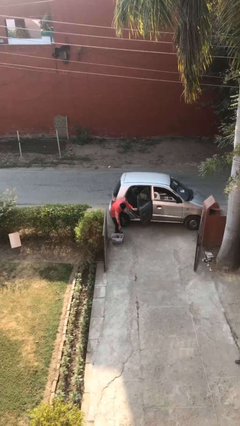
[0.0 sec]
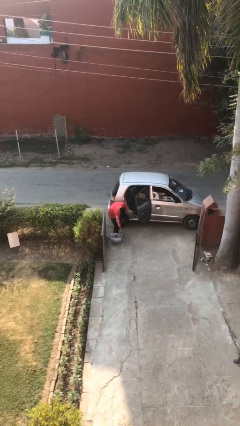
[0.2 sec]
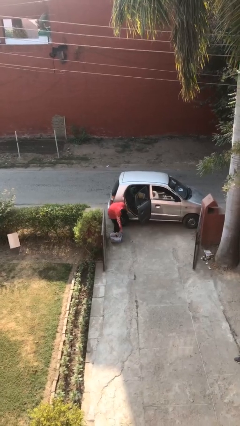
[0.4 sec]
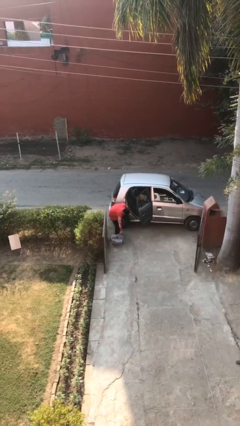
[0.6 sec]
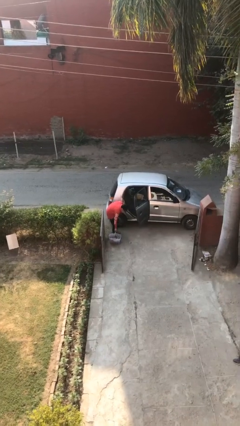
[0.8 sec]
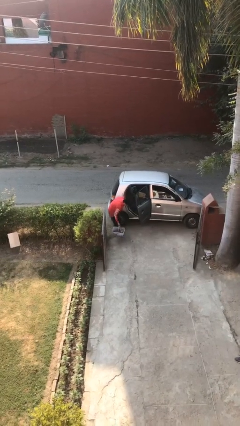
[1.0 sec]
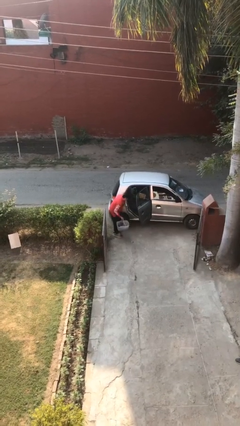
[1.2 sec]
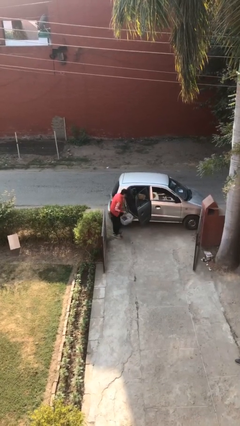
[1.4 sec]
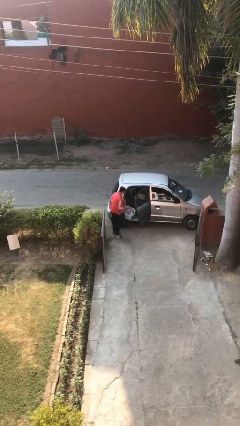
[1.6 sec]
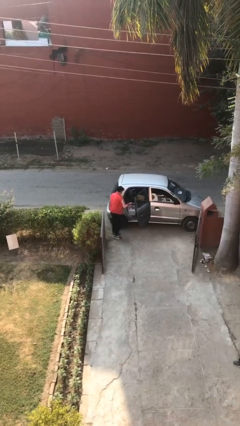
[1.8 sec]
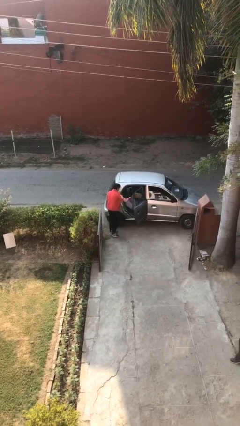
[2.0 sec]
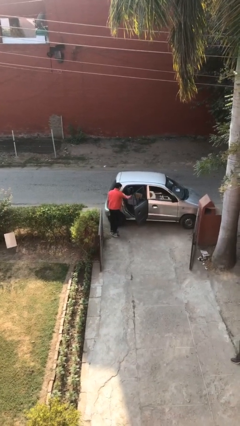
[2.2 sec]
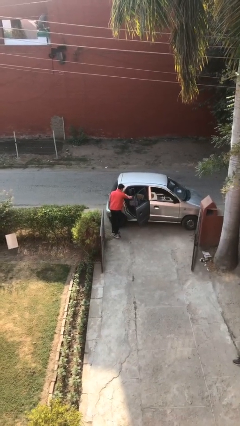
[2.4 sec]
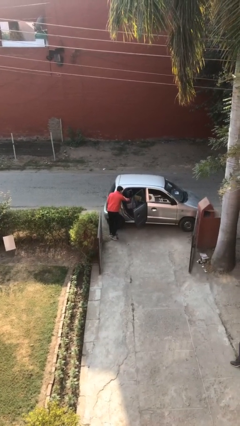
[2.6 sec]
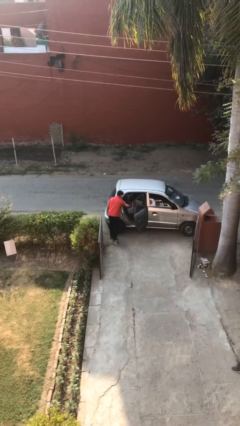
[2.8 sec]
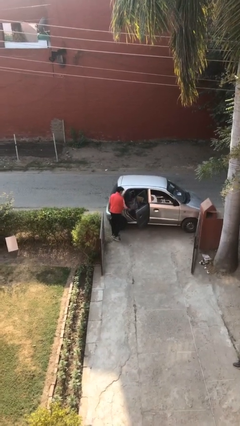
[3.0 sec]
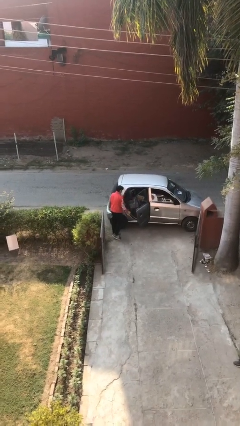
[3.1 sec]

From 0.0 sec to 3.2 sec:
person loads car

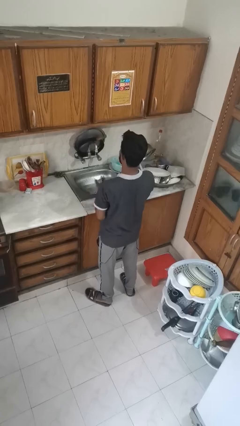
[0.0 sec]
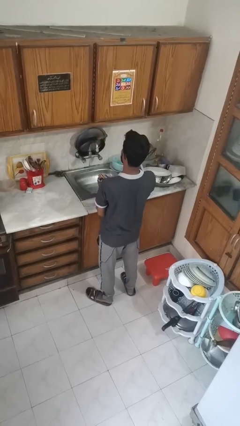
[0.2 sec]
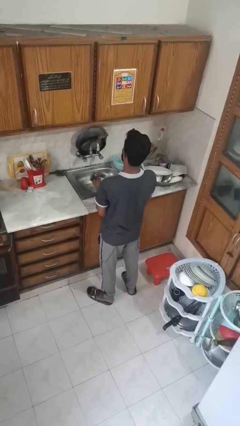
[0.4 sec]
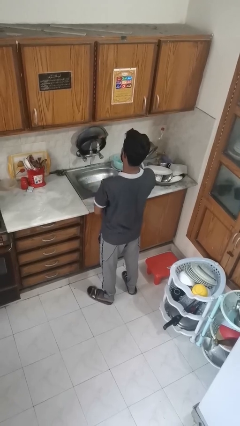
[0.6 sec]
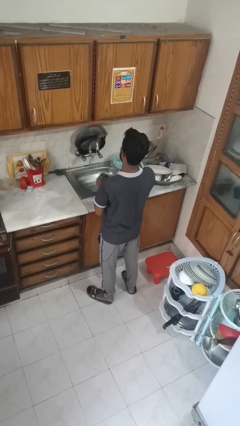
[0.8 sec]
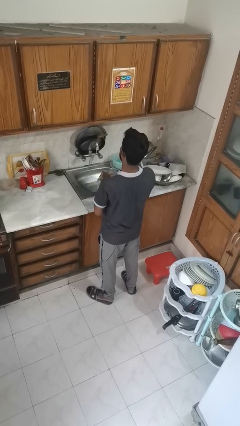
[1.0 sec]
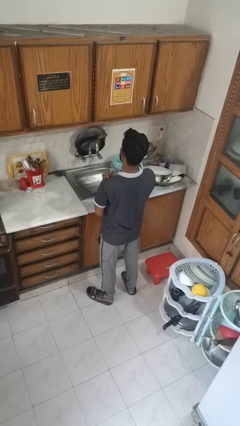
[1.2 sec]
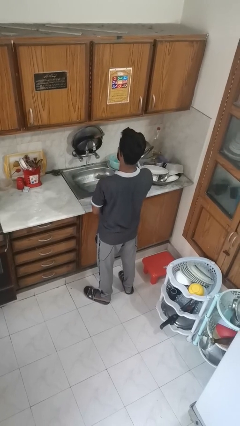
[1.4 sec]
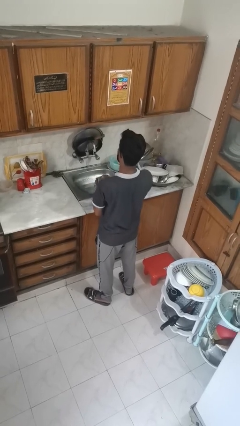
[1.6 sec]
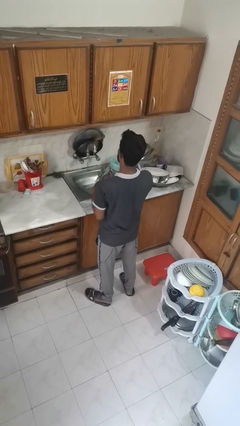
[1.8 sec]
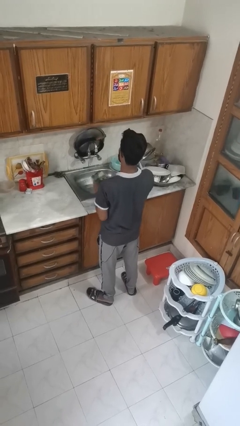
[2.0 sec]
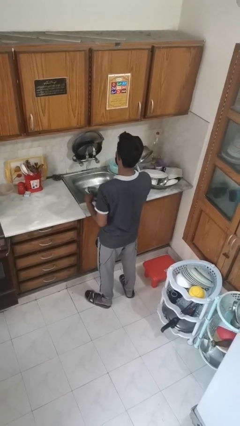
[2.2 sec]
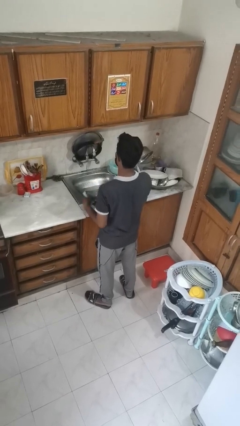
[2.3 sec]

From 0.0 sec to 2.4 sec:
person dries hands with towel

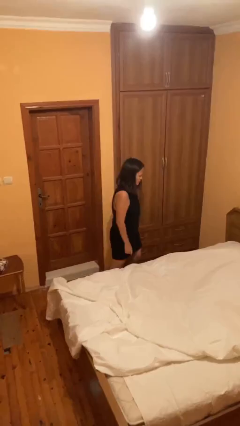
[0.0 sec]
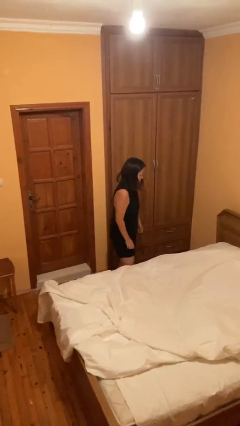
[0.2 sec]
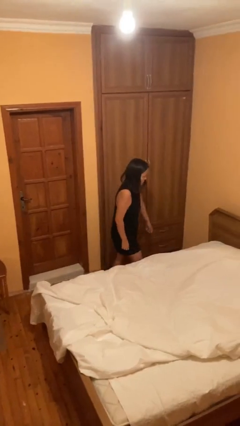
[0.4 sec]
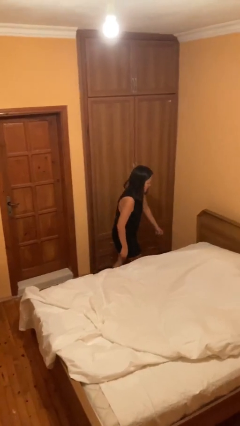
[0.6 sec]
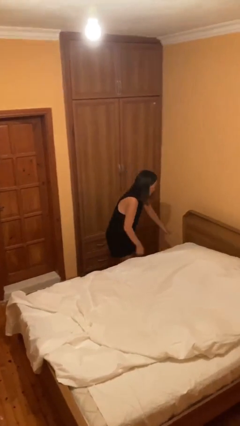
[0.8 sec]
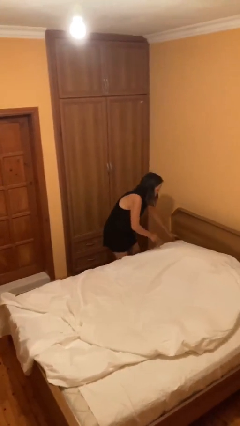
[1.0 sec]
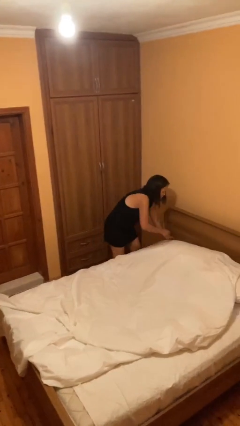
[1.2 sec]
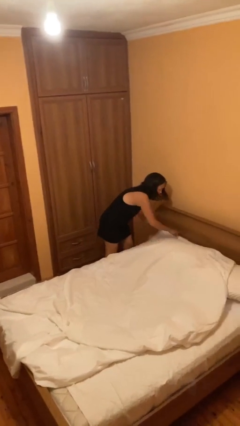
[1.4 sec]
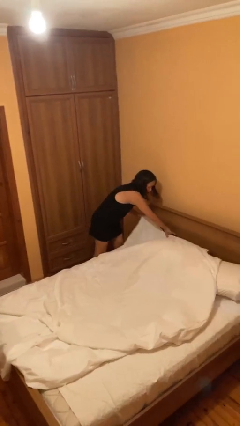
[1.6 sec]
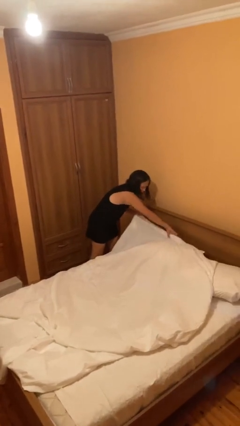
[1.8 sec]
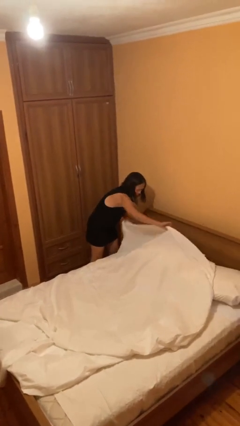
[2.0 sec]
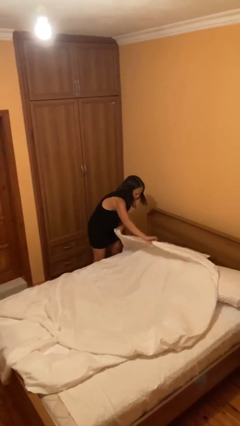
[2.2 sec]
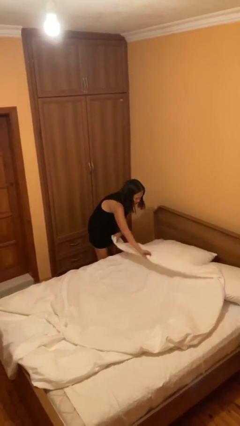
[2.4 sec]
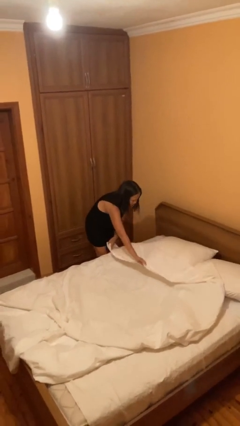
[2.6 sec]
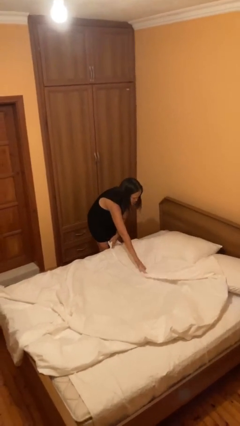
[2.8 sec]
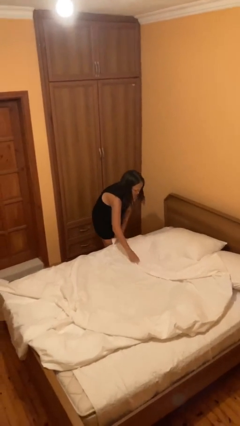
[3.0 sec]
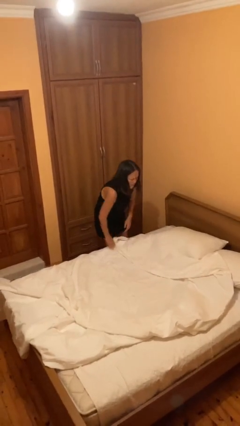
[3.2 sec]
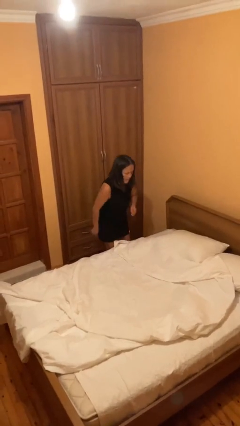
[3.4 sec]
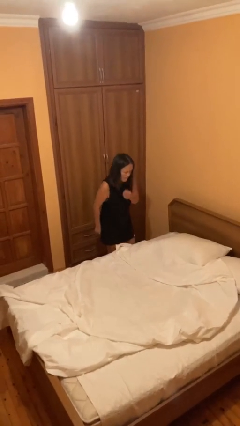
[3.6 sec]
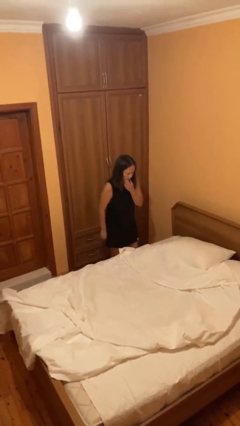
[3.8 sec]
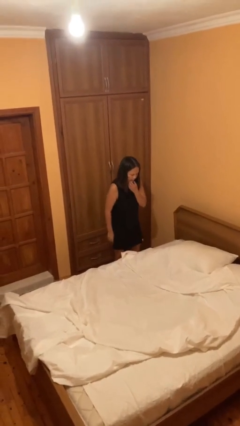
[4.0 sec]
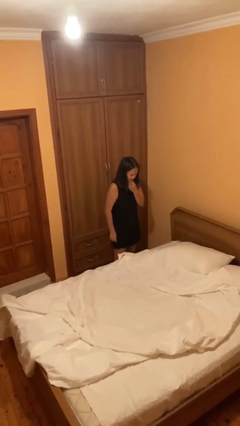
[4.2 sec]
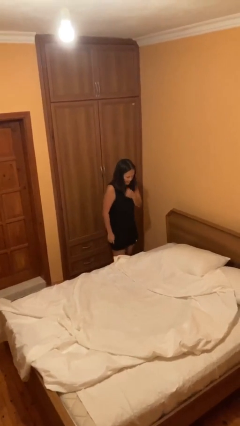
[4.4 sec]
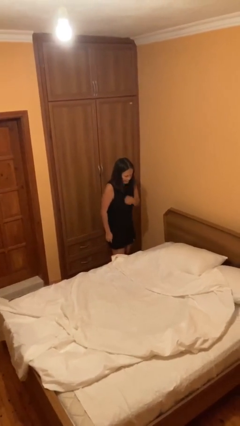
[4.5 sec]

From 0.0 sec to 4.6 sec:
person makes bed

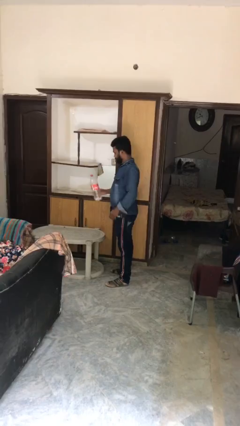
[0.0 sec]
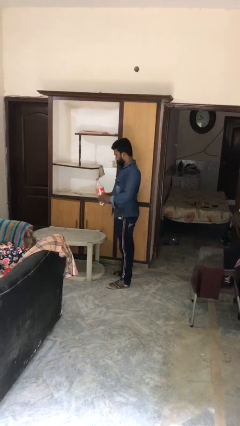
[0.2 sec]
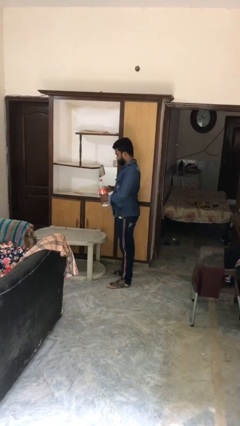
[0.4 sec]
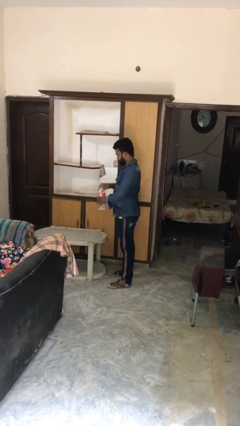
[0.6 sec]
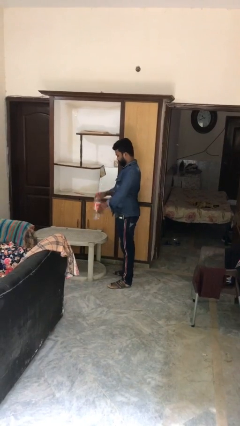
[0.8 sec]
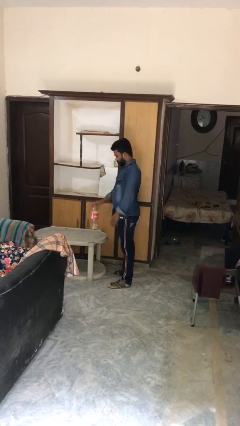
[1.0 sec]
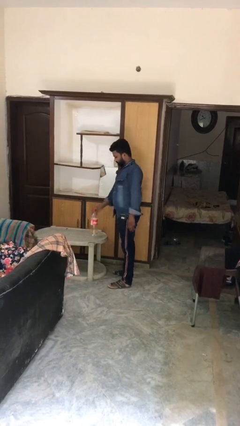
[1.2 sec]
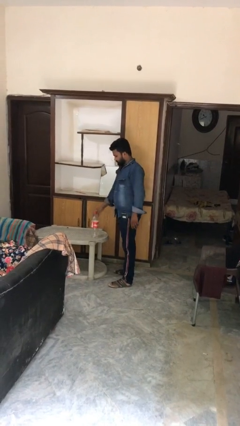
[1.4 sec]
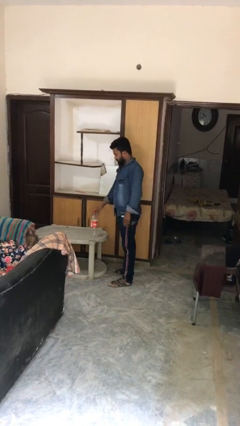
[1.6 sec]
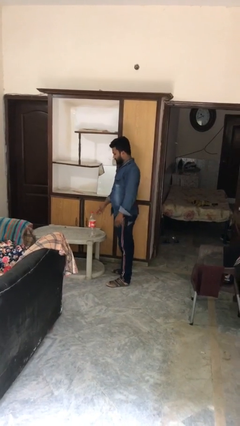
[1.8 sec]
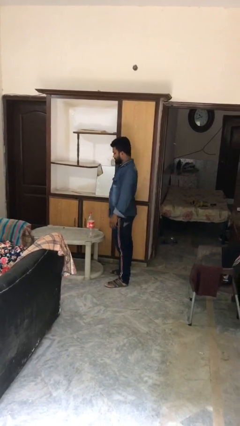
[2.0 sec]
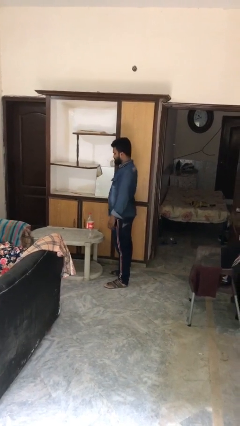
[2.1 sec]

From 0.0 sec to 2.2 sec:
person puts down object on table

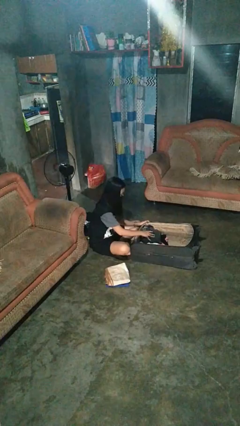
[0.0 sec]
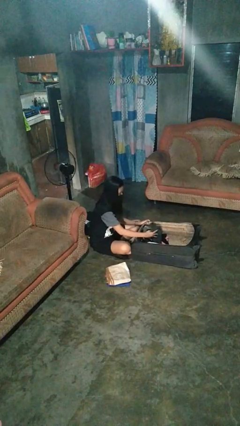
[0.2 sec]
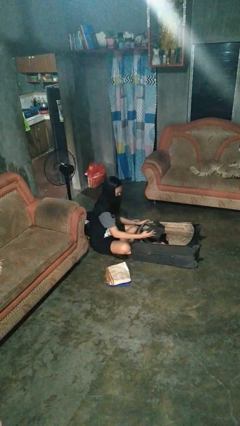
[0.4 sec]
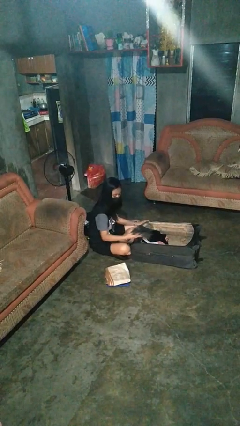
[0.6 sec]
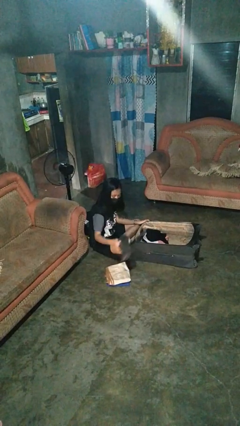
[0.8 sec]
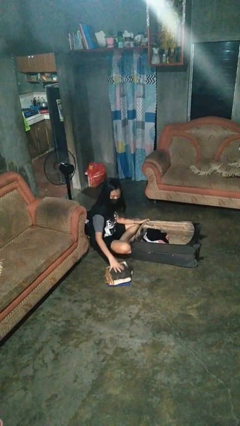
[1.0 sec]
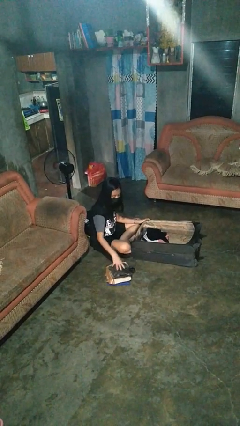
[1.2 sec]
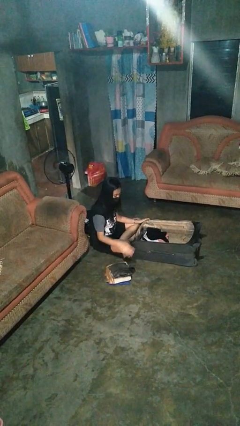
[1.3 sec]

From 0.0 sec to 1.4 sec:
person unloads clothes from suitcase

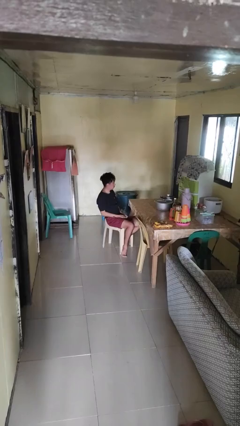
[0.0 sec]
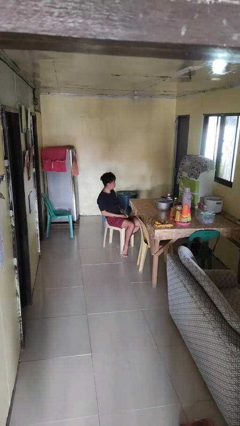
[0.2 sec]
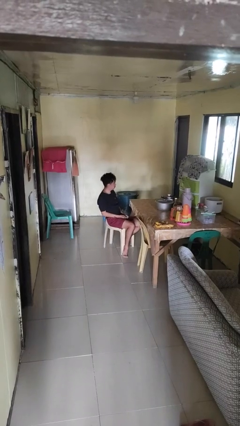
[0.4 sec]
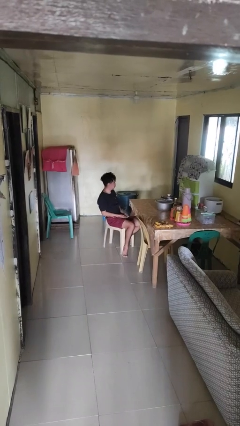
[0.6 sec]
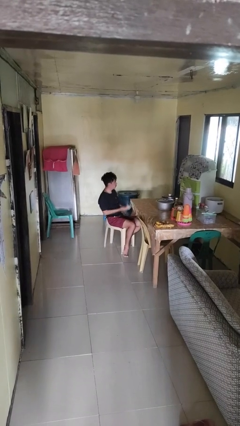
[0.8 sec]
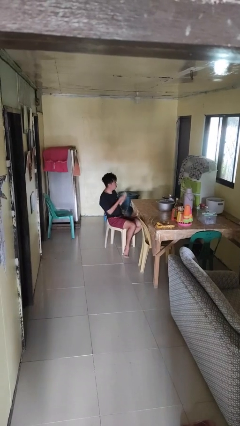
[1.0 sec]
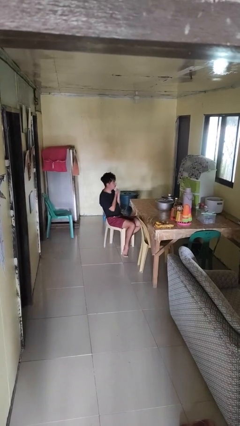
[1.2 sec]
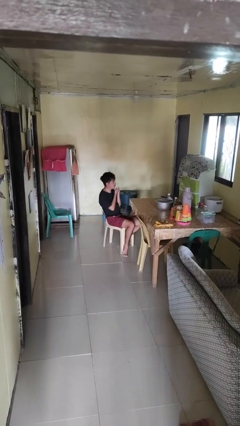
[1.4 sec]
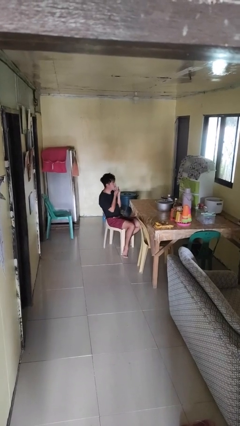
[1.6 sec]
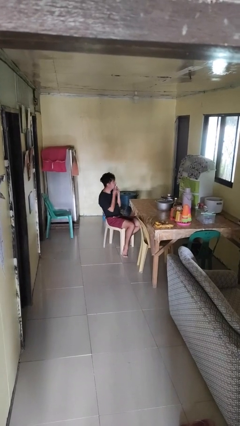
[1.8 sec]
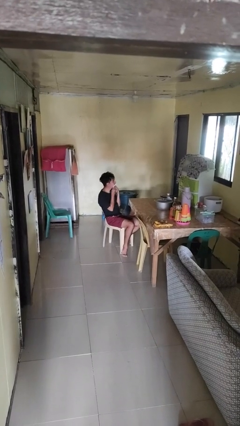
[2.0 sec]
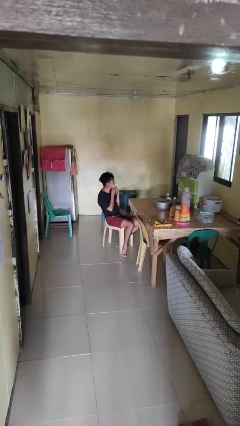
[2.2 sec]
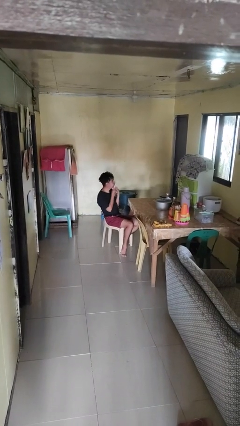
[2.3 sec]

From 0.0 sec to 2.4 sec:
person wipes mouth with napkin

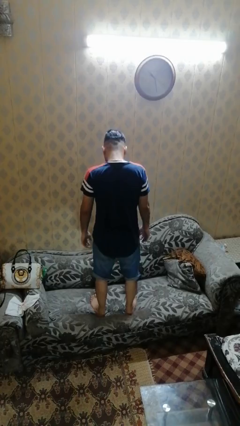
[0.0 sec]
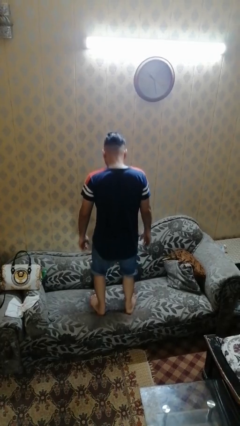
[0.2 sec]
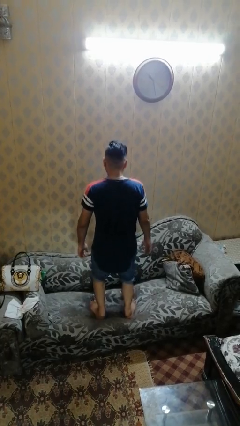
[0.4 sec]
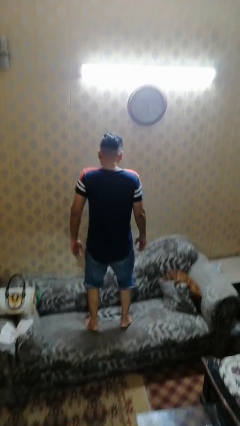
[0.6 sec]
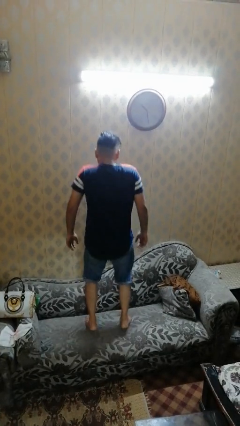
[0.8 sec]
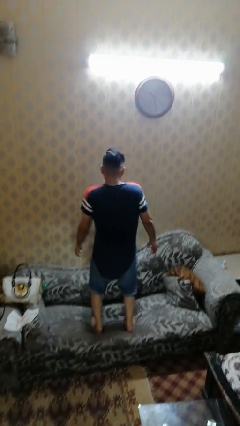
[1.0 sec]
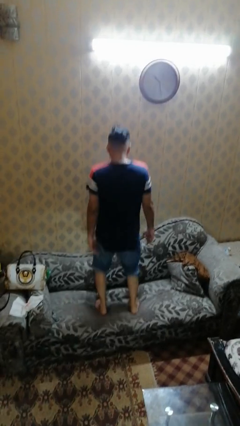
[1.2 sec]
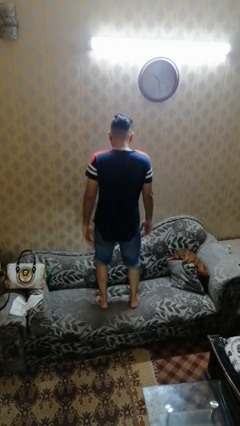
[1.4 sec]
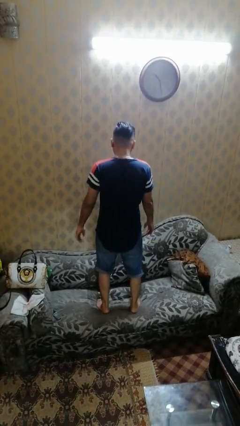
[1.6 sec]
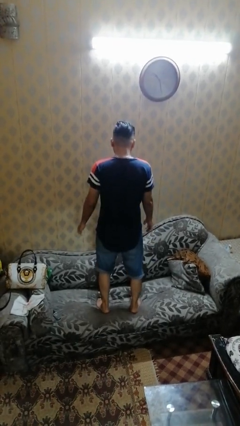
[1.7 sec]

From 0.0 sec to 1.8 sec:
person jumps on couch
